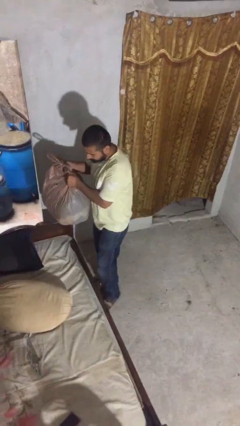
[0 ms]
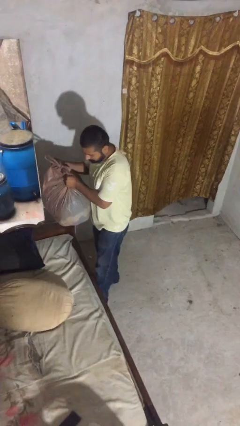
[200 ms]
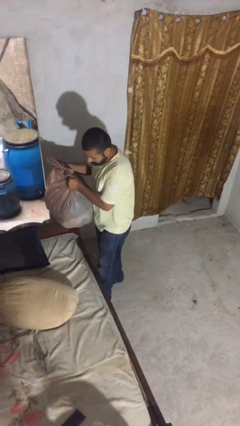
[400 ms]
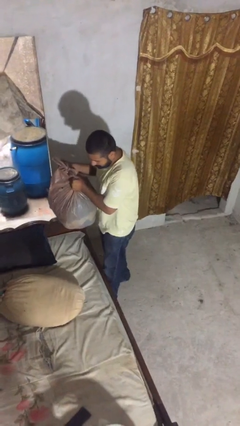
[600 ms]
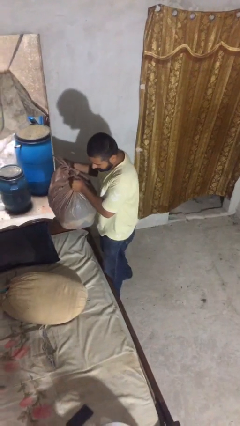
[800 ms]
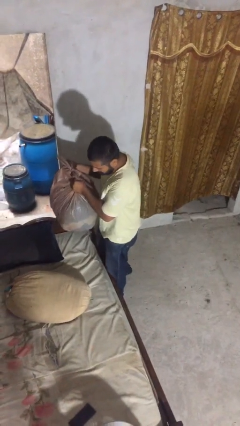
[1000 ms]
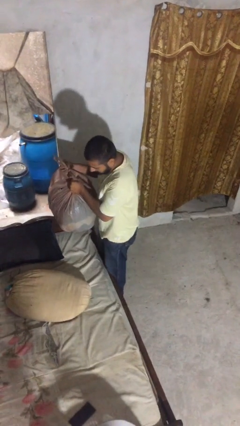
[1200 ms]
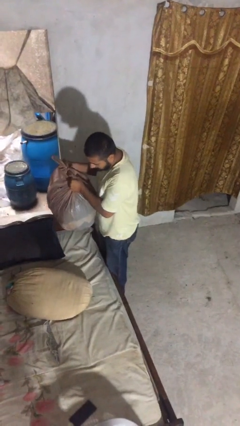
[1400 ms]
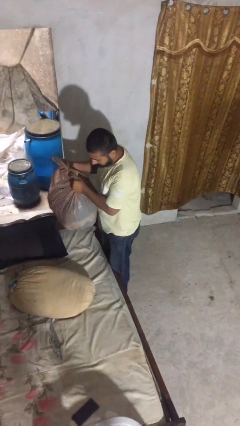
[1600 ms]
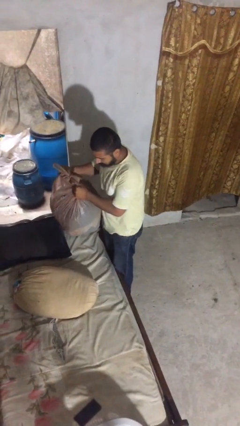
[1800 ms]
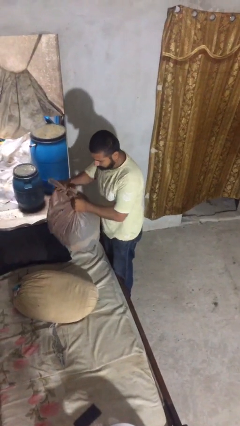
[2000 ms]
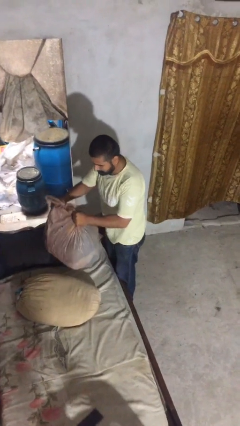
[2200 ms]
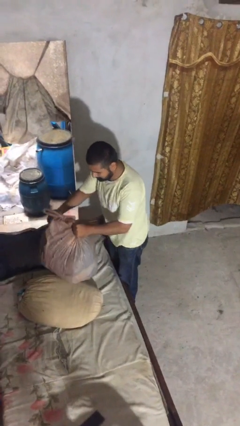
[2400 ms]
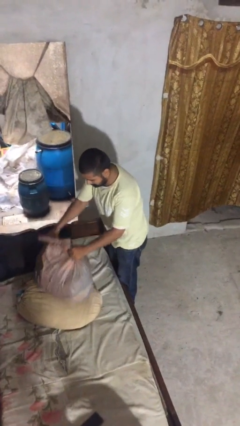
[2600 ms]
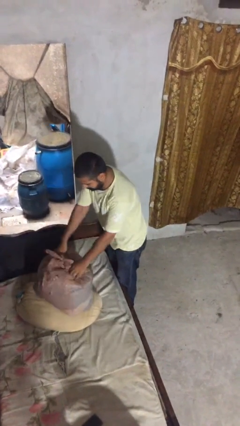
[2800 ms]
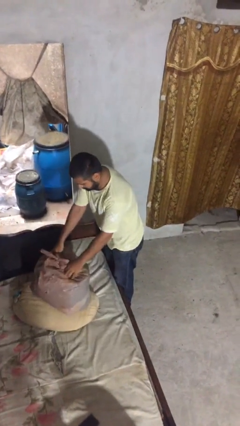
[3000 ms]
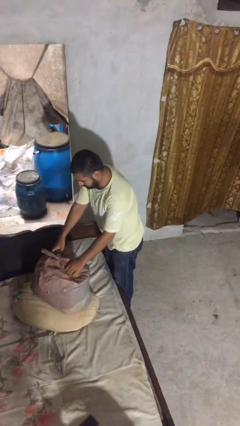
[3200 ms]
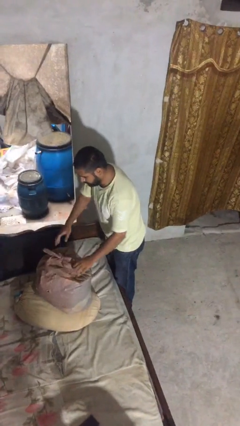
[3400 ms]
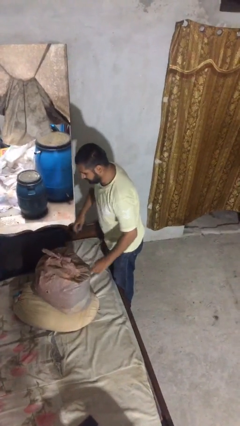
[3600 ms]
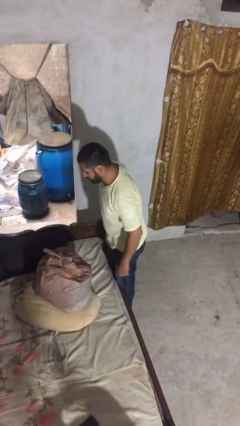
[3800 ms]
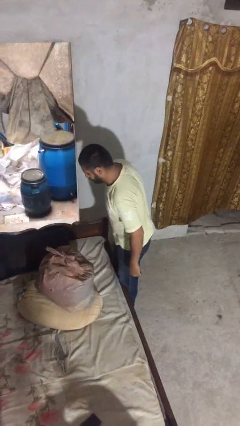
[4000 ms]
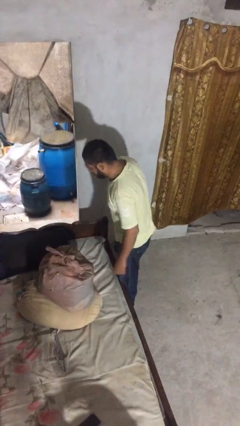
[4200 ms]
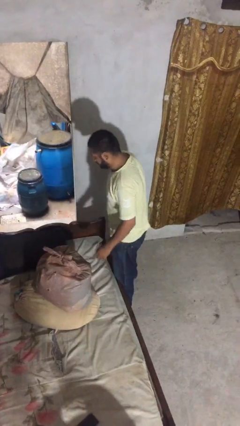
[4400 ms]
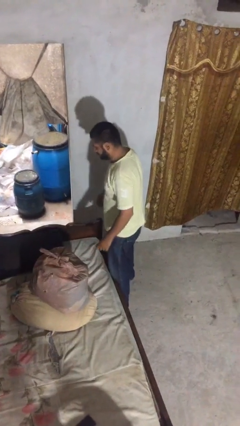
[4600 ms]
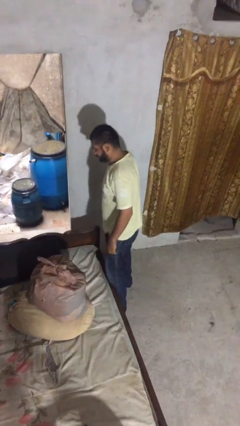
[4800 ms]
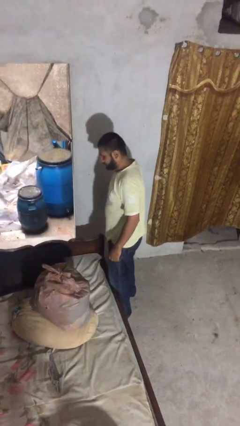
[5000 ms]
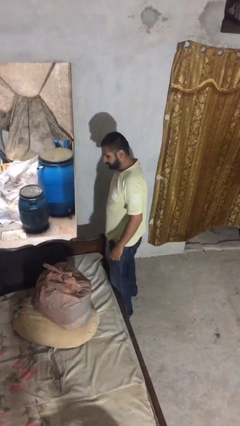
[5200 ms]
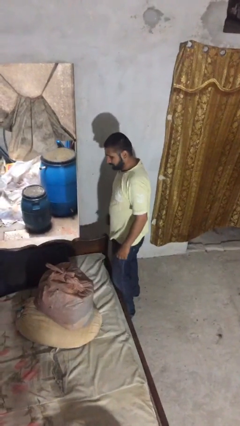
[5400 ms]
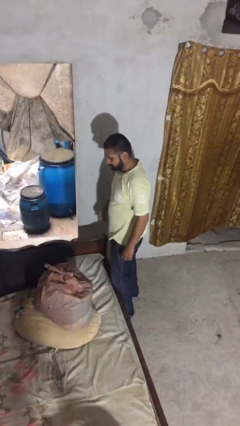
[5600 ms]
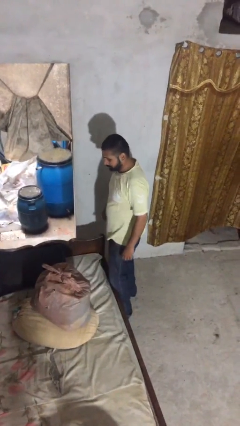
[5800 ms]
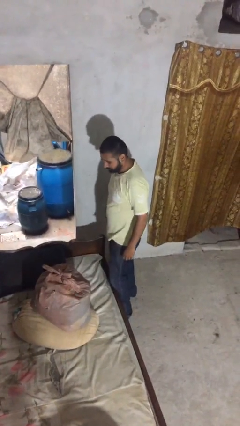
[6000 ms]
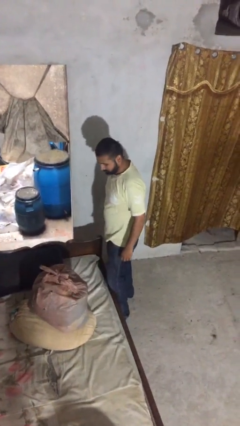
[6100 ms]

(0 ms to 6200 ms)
person puts down object on floor

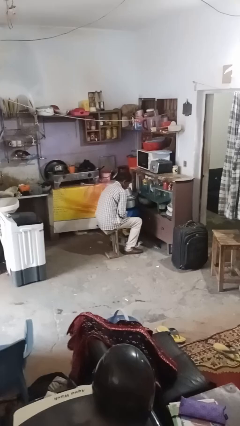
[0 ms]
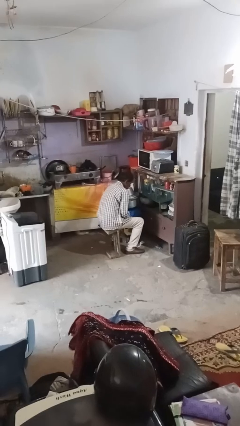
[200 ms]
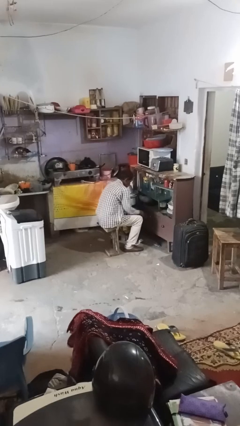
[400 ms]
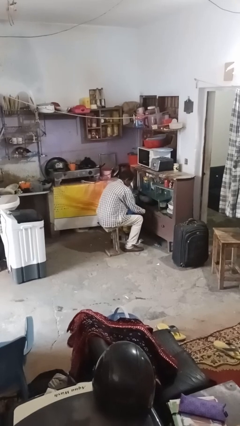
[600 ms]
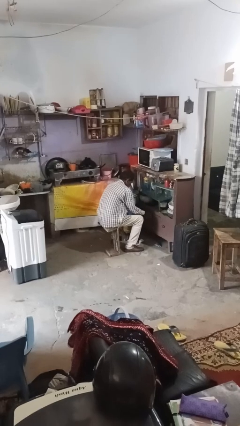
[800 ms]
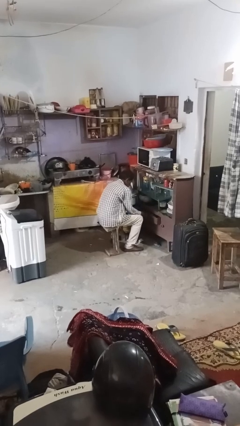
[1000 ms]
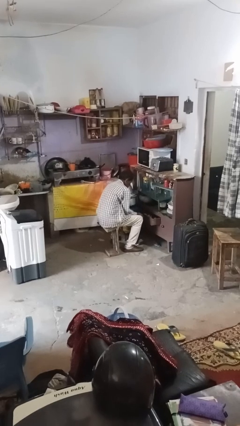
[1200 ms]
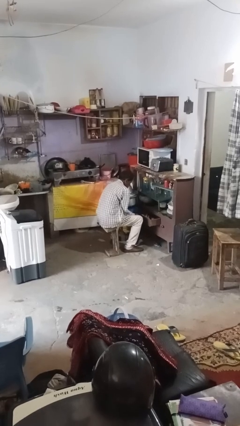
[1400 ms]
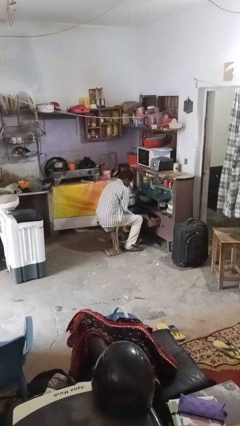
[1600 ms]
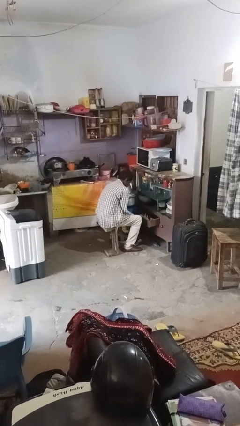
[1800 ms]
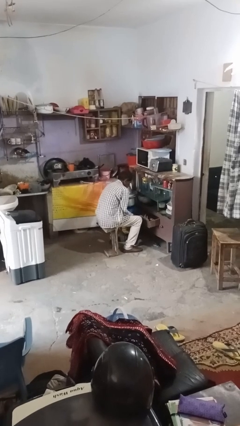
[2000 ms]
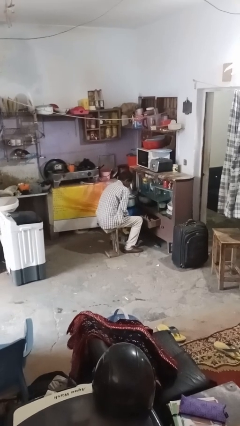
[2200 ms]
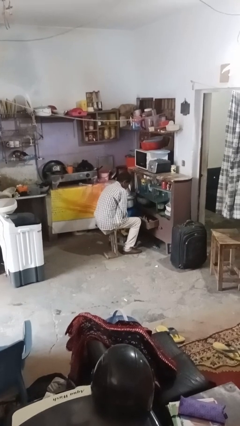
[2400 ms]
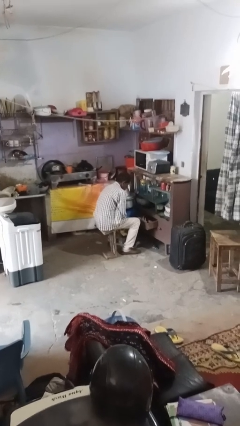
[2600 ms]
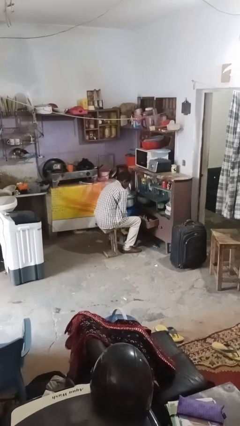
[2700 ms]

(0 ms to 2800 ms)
person opens kitchen drawer

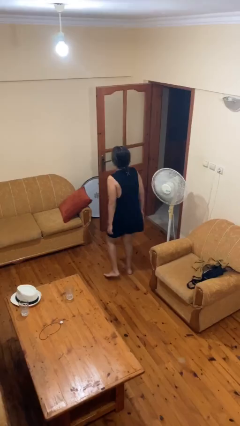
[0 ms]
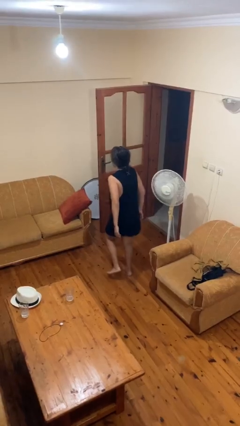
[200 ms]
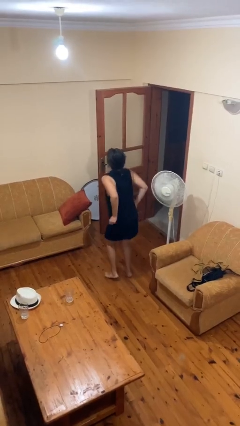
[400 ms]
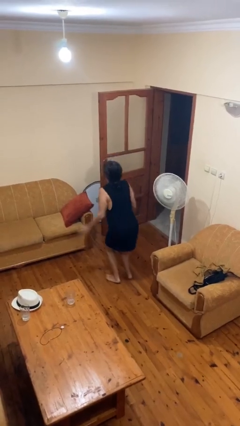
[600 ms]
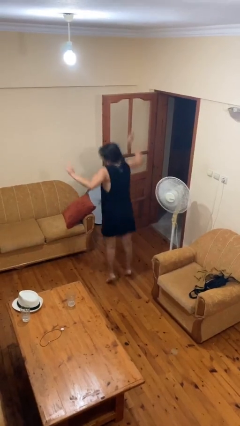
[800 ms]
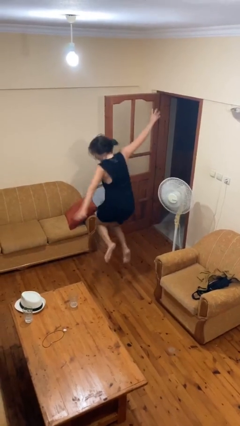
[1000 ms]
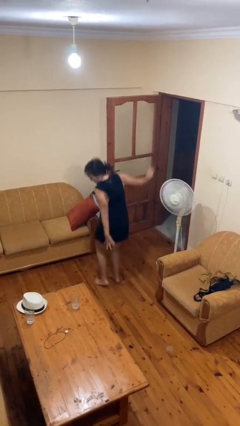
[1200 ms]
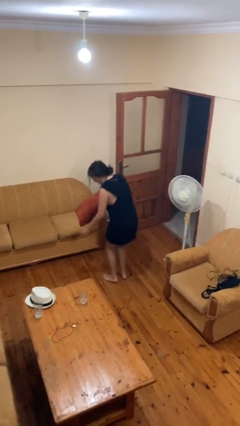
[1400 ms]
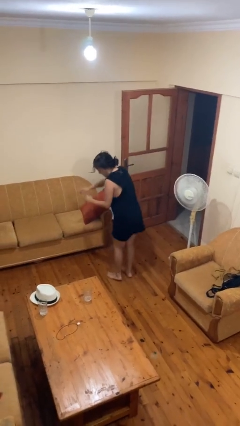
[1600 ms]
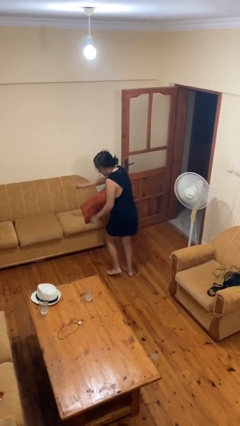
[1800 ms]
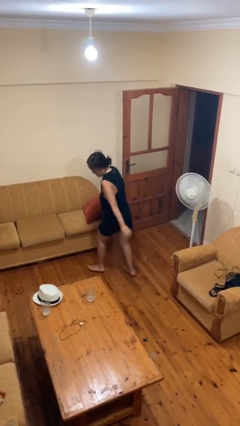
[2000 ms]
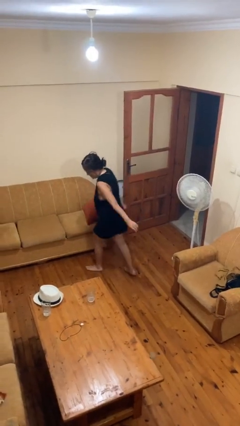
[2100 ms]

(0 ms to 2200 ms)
person jumps

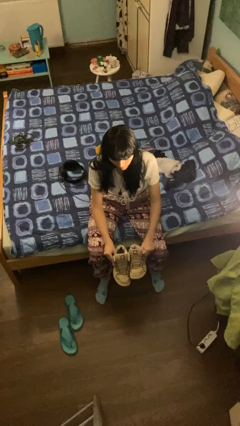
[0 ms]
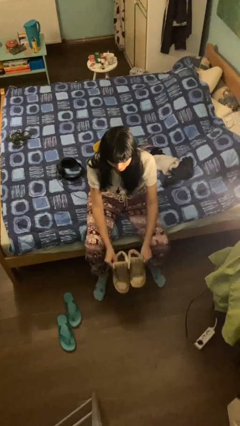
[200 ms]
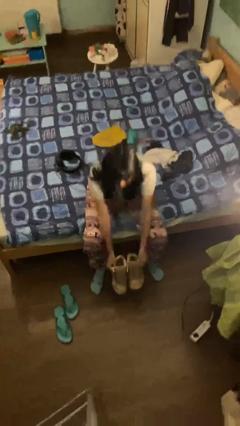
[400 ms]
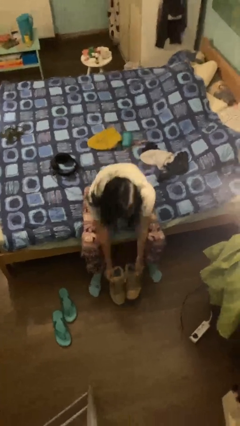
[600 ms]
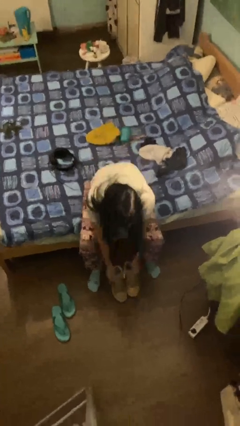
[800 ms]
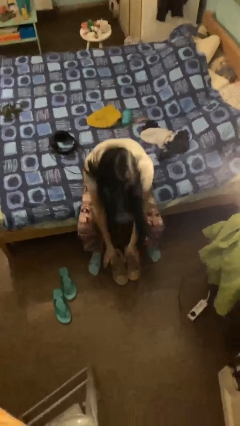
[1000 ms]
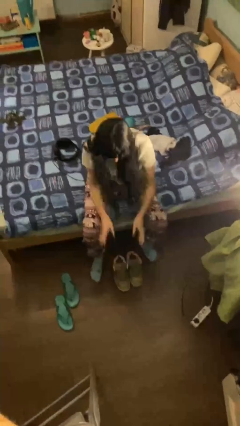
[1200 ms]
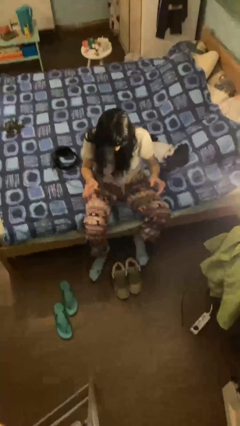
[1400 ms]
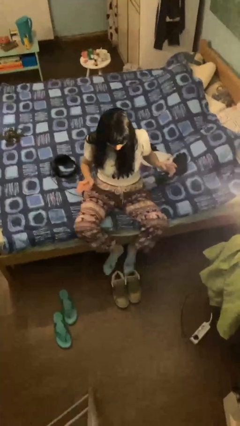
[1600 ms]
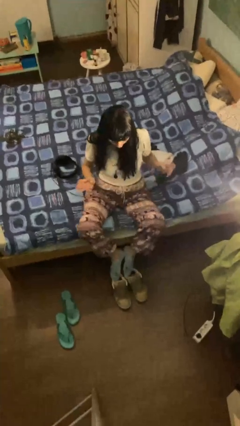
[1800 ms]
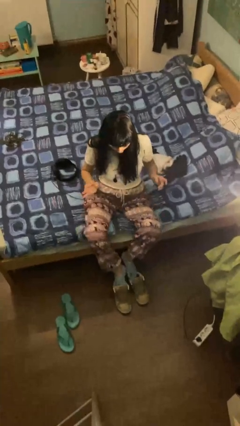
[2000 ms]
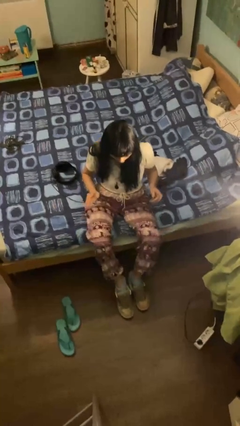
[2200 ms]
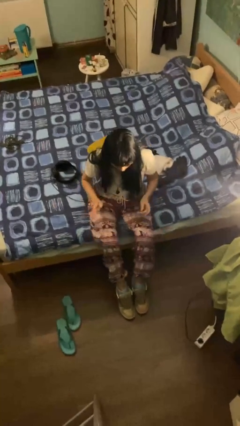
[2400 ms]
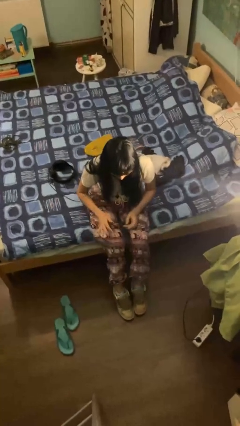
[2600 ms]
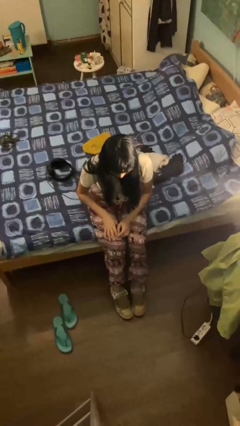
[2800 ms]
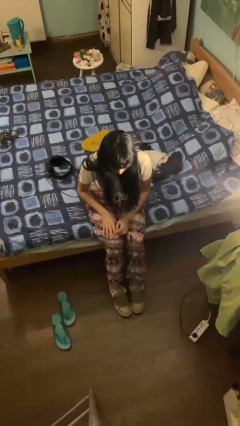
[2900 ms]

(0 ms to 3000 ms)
person puts on shoes

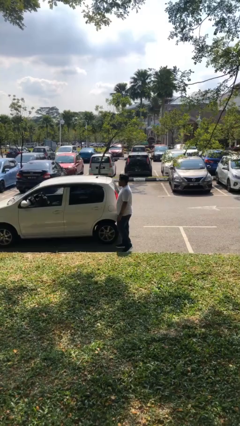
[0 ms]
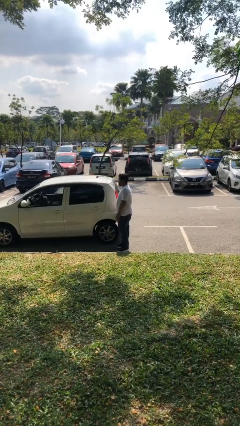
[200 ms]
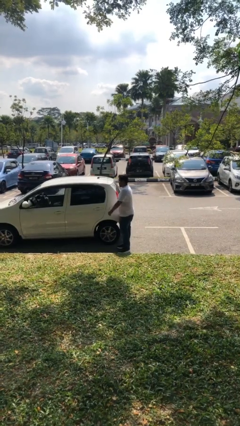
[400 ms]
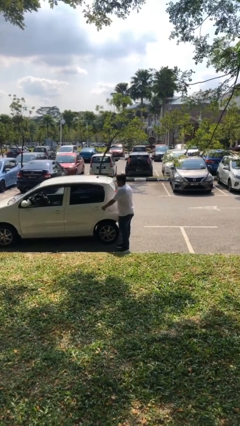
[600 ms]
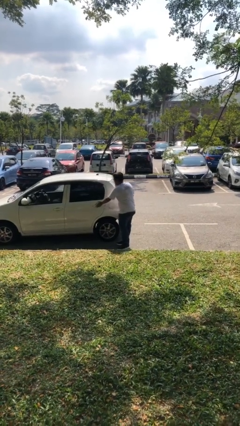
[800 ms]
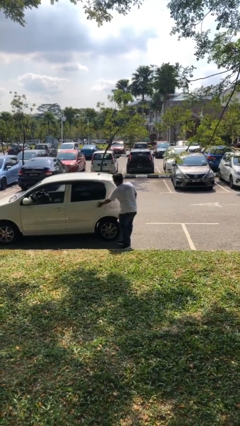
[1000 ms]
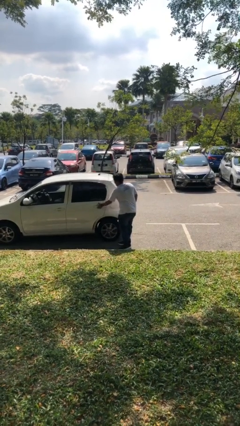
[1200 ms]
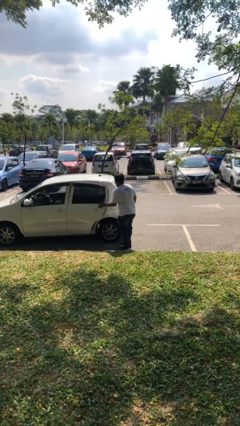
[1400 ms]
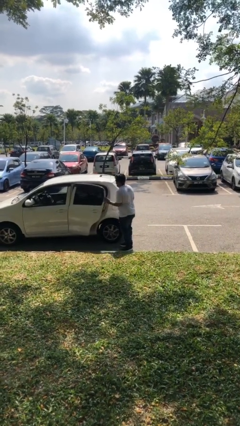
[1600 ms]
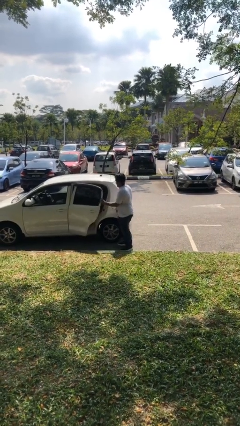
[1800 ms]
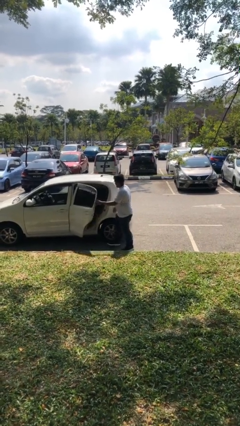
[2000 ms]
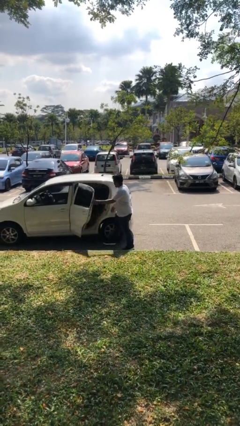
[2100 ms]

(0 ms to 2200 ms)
person opens car door

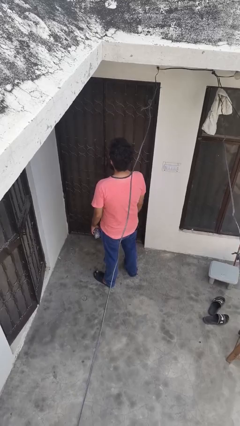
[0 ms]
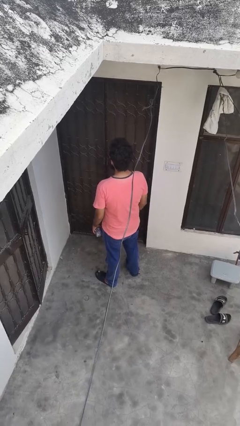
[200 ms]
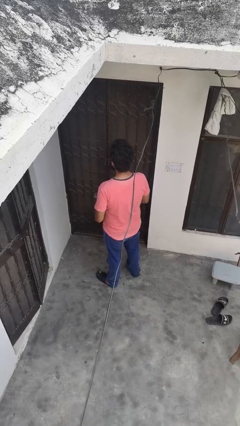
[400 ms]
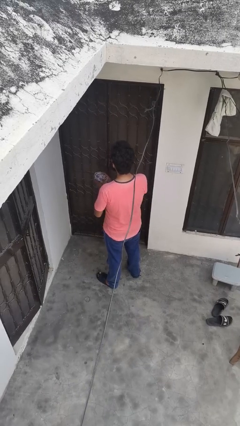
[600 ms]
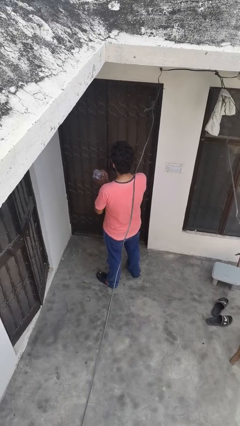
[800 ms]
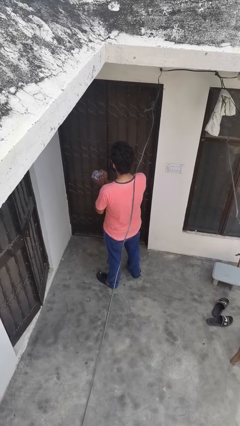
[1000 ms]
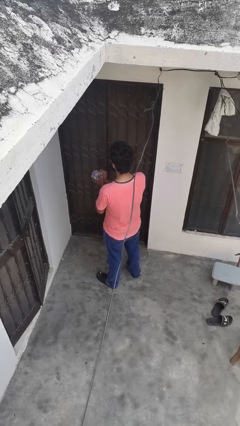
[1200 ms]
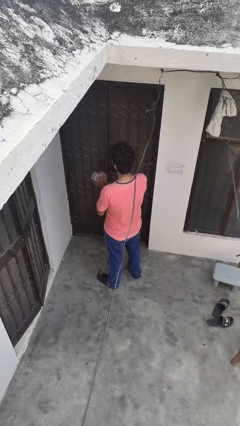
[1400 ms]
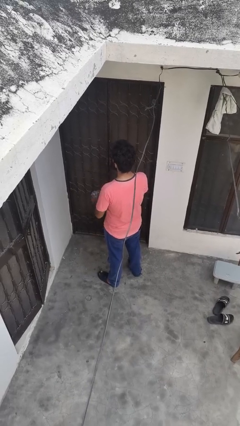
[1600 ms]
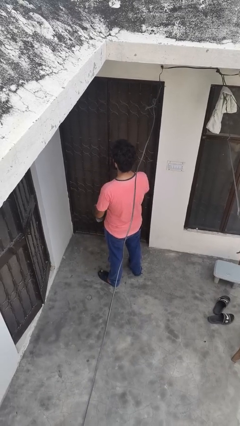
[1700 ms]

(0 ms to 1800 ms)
person squeezes object
